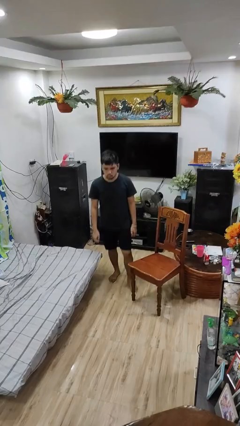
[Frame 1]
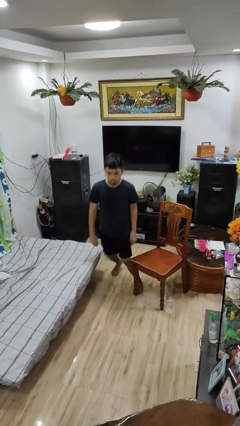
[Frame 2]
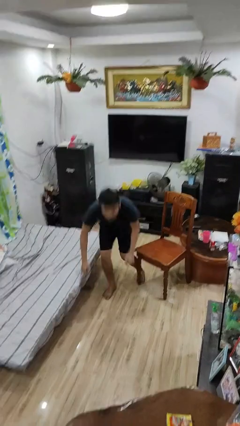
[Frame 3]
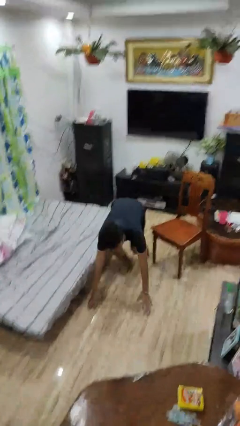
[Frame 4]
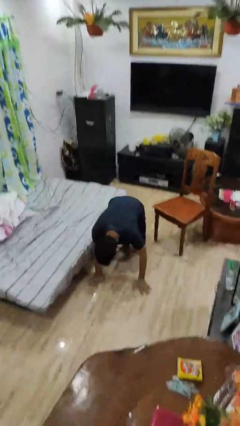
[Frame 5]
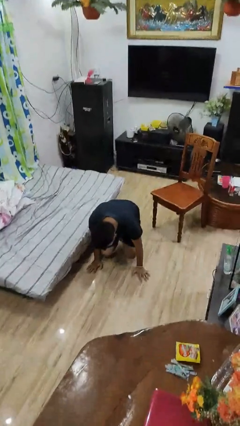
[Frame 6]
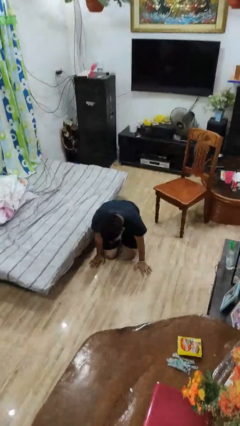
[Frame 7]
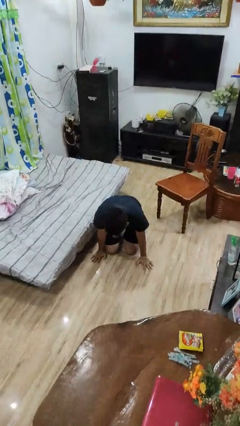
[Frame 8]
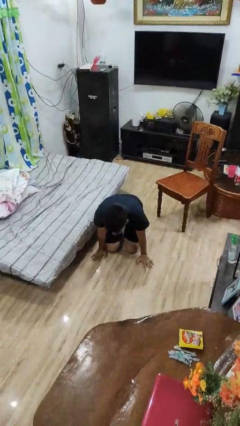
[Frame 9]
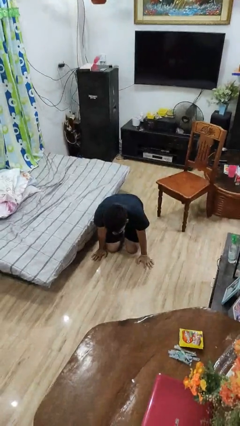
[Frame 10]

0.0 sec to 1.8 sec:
person trips on object on floor

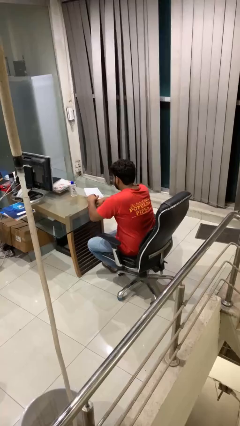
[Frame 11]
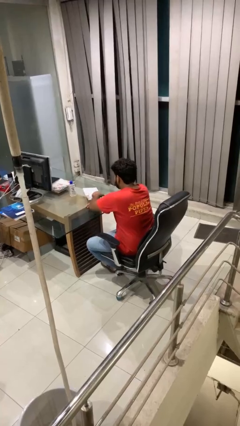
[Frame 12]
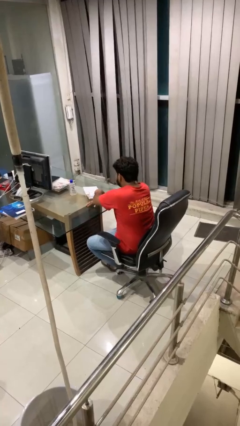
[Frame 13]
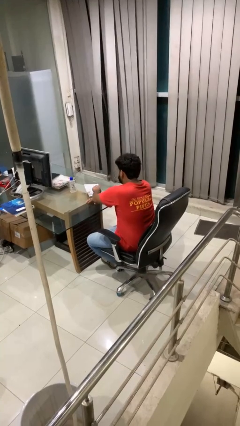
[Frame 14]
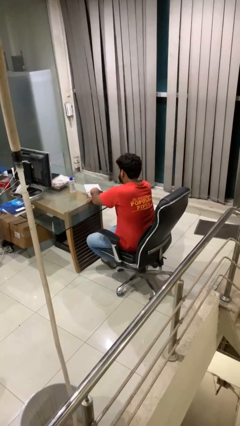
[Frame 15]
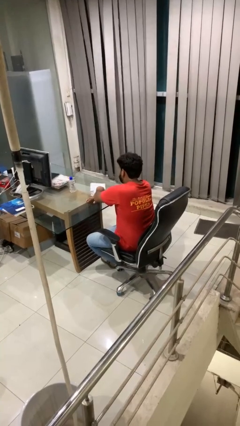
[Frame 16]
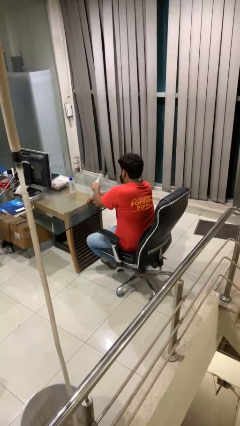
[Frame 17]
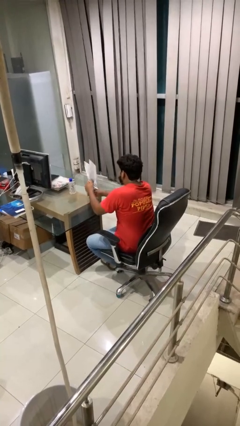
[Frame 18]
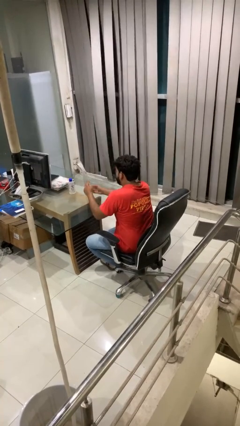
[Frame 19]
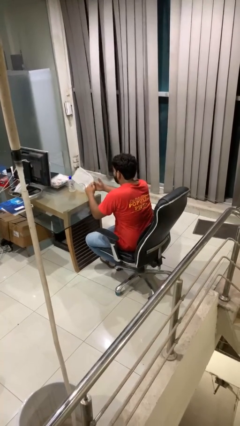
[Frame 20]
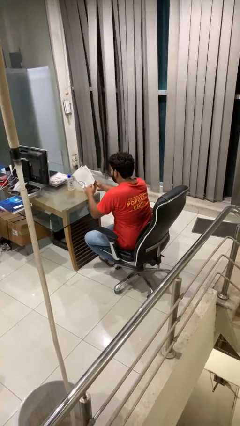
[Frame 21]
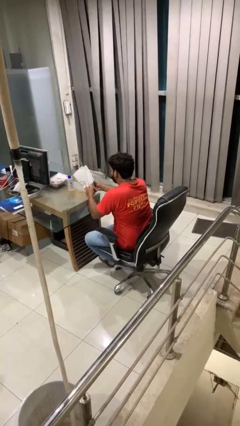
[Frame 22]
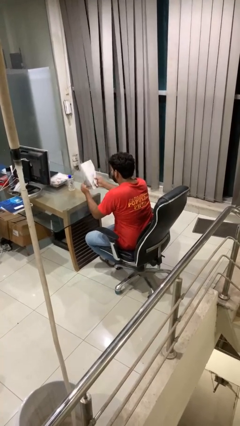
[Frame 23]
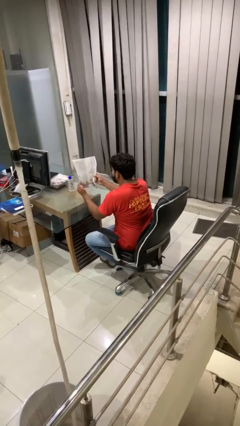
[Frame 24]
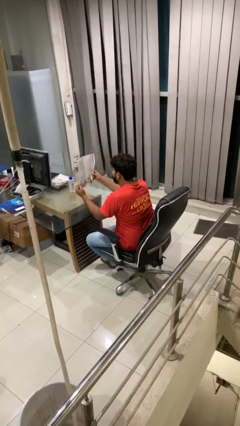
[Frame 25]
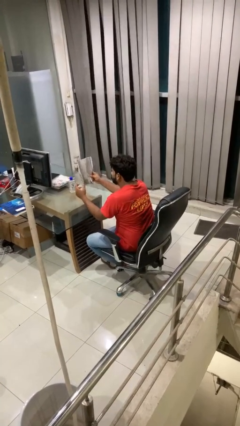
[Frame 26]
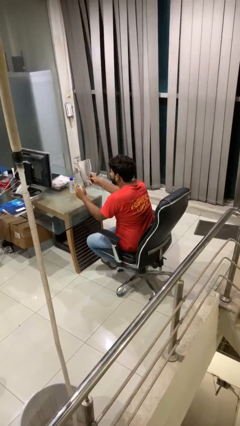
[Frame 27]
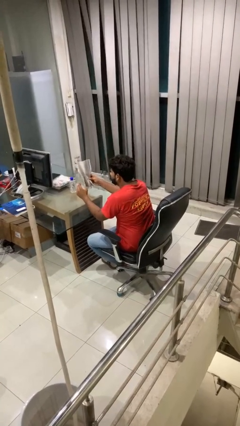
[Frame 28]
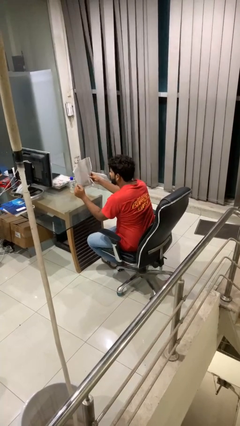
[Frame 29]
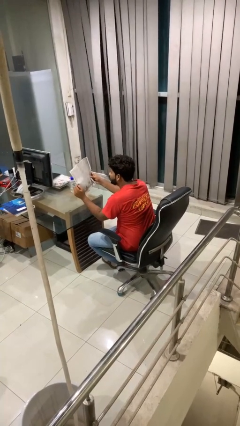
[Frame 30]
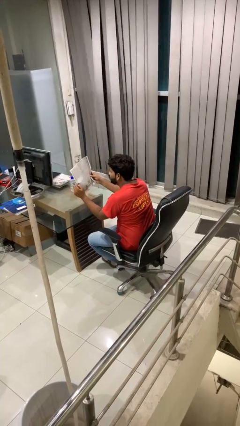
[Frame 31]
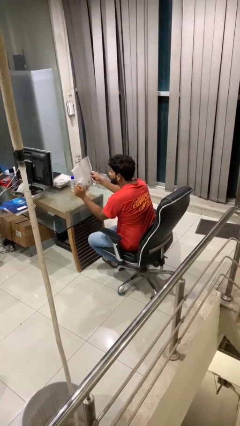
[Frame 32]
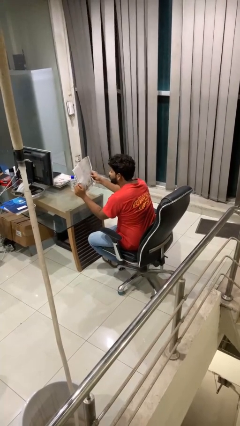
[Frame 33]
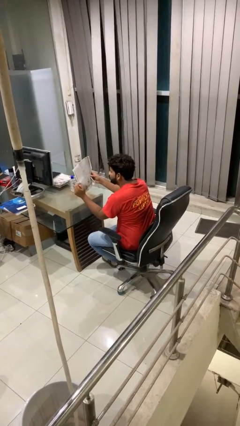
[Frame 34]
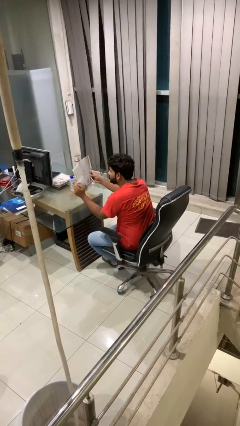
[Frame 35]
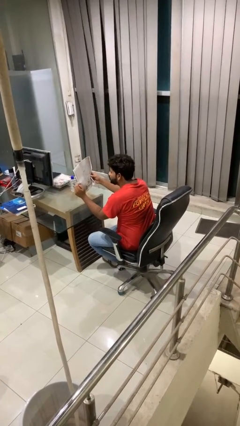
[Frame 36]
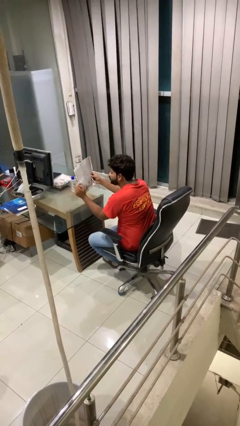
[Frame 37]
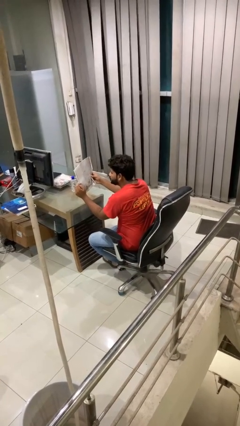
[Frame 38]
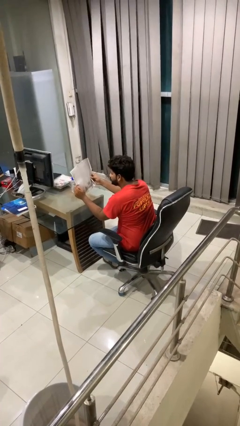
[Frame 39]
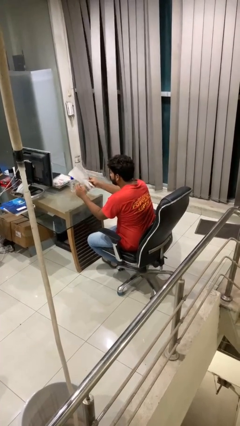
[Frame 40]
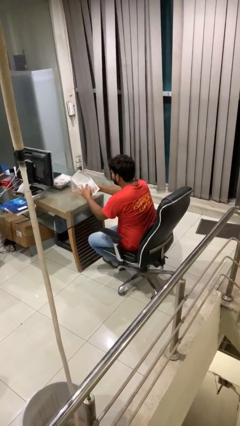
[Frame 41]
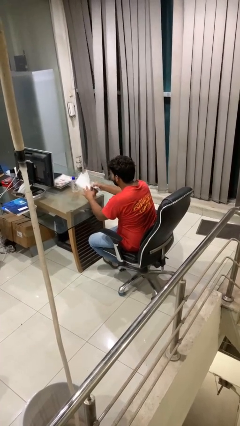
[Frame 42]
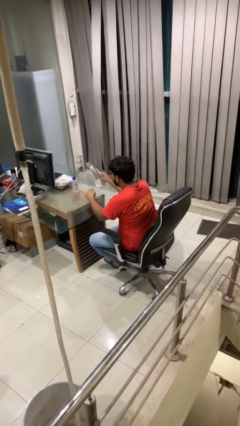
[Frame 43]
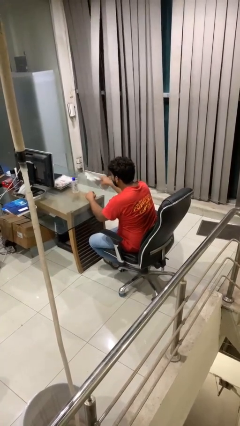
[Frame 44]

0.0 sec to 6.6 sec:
person reads newspaper

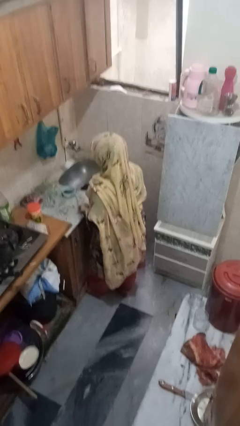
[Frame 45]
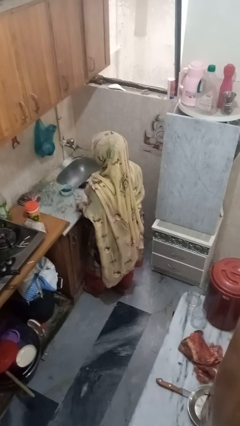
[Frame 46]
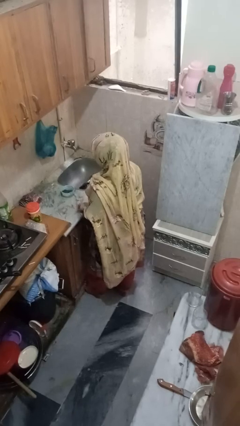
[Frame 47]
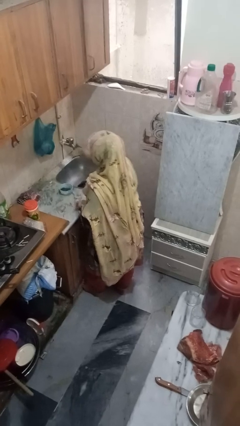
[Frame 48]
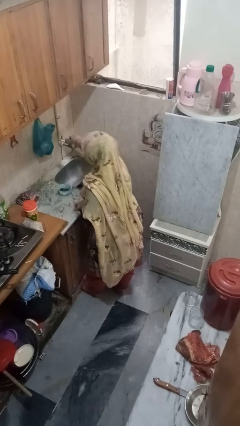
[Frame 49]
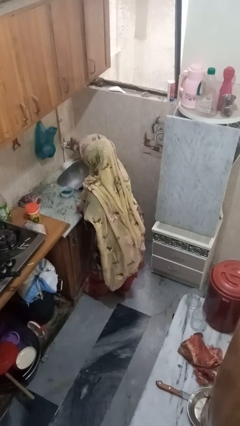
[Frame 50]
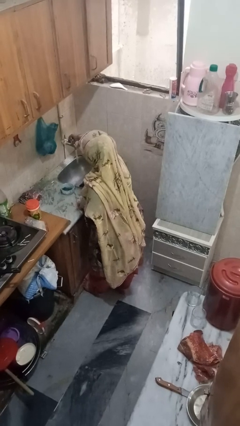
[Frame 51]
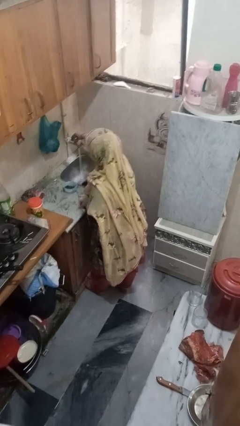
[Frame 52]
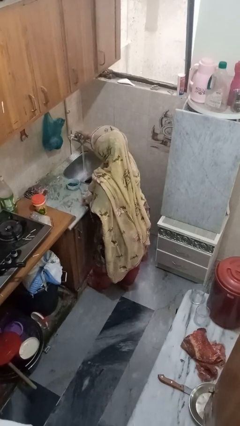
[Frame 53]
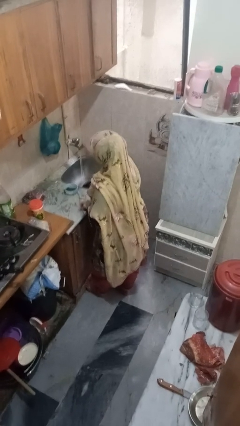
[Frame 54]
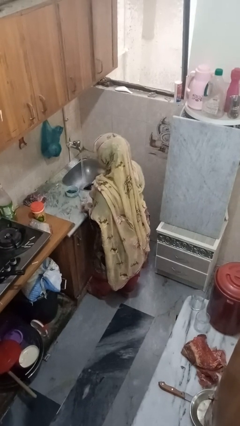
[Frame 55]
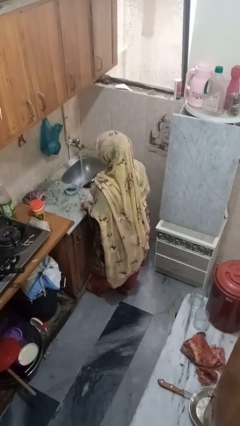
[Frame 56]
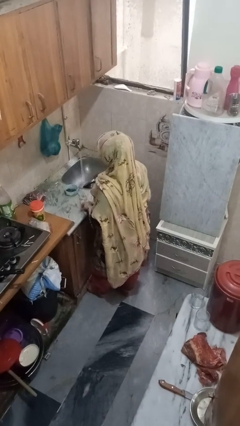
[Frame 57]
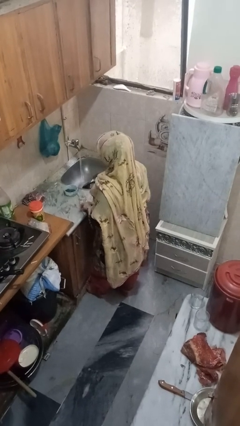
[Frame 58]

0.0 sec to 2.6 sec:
person turns on faucet

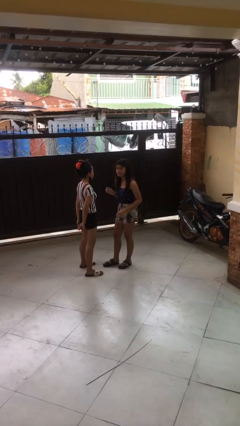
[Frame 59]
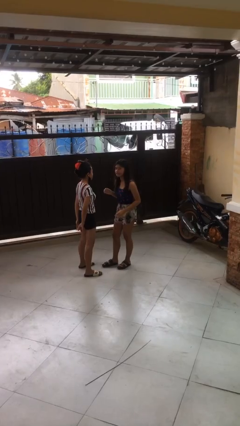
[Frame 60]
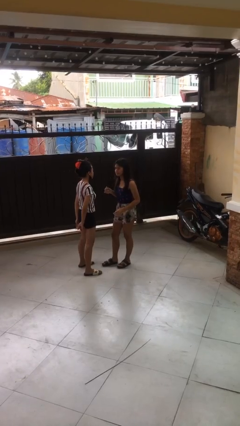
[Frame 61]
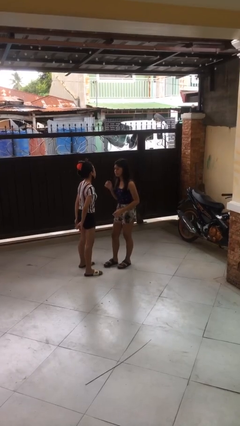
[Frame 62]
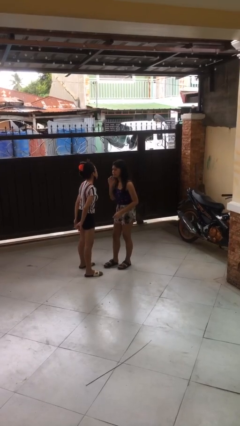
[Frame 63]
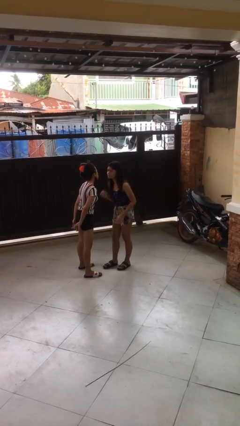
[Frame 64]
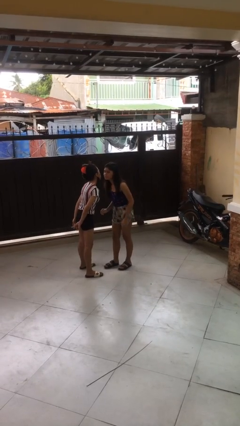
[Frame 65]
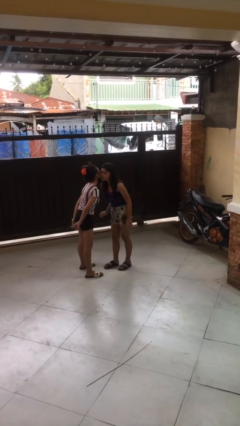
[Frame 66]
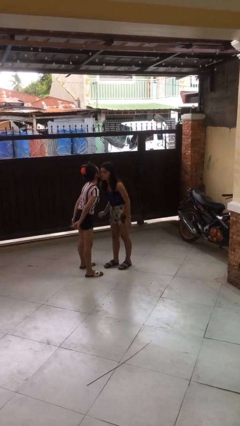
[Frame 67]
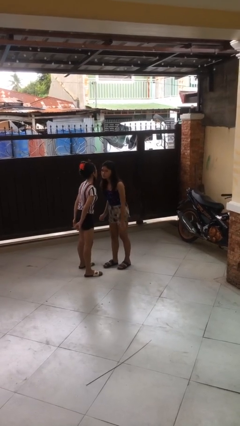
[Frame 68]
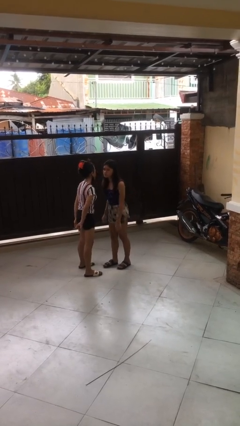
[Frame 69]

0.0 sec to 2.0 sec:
person kisses cheek of person

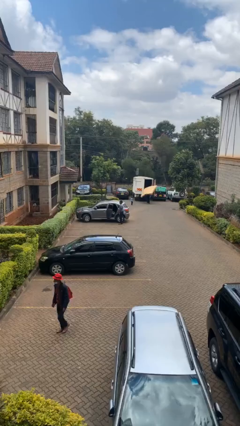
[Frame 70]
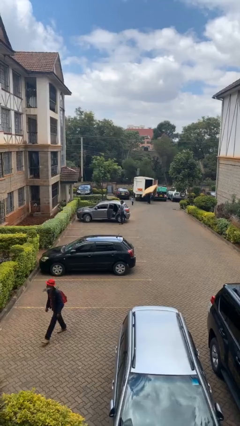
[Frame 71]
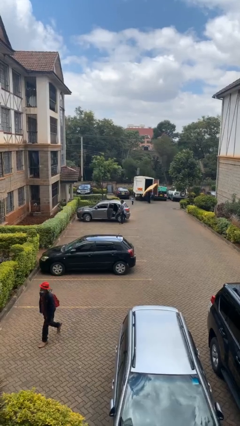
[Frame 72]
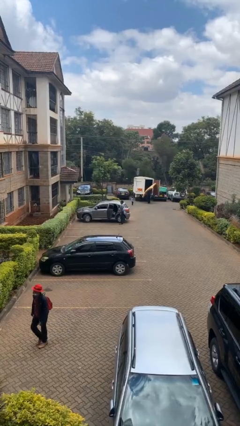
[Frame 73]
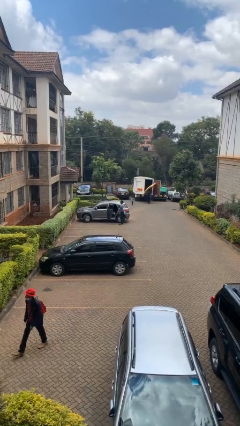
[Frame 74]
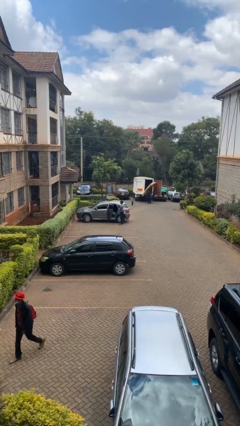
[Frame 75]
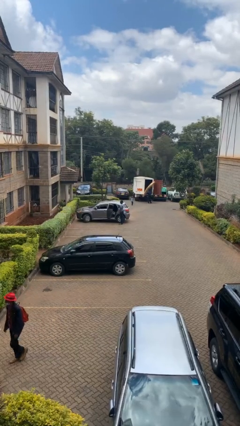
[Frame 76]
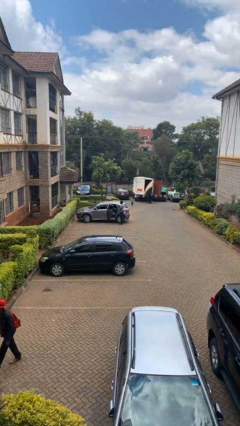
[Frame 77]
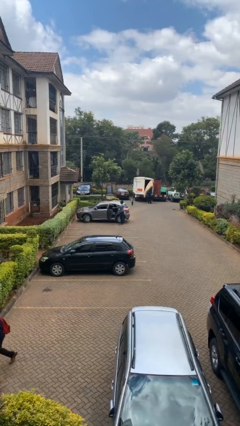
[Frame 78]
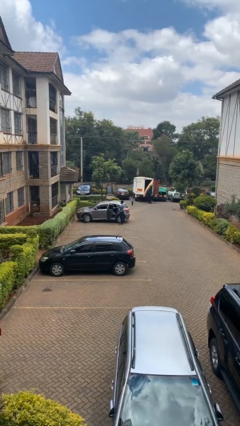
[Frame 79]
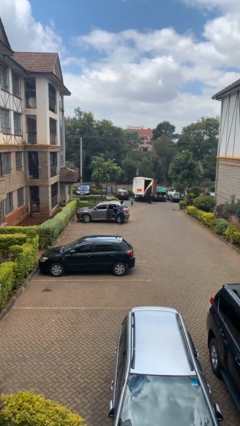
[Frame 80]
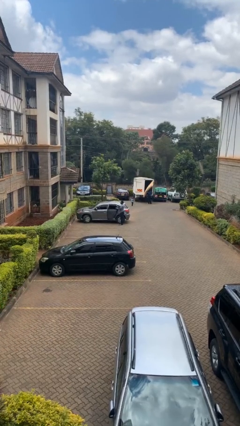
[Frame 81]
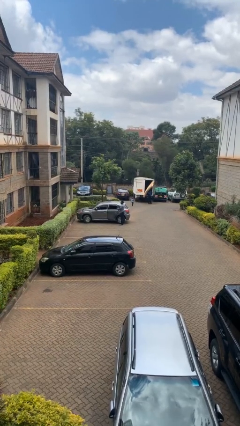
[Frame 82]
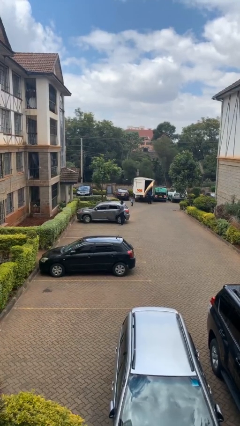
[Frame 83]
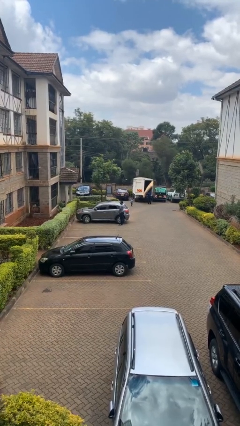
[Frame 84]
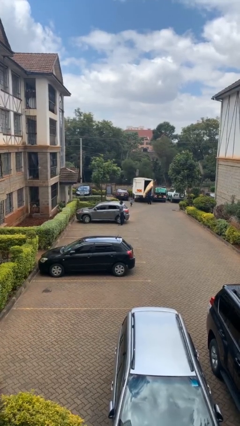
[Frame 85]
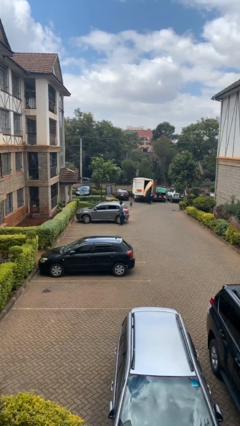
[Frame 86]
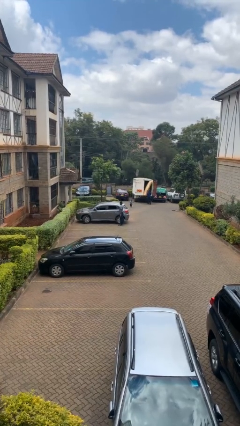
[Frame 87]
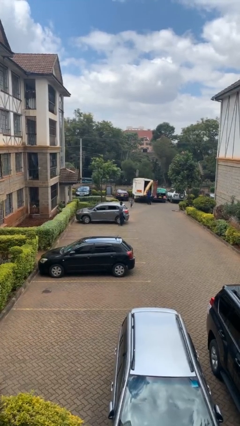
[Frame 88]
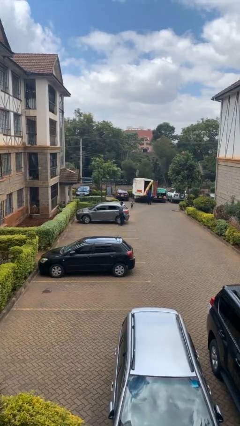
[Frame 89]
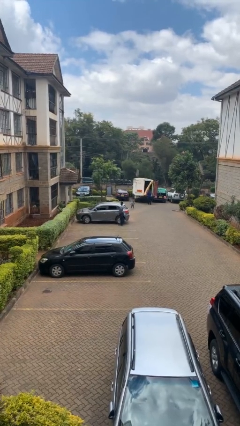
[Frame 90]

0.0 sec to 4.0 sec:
person closes car door

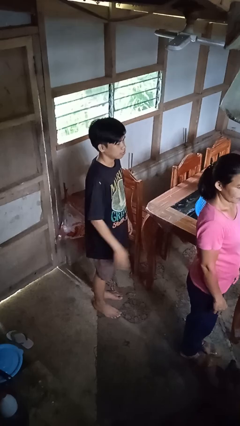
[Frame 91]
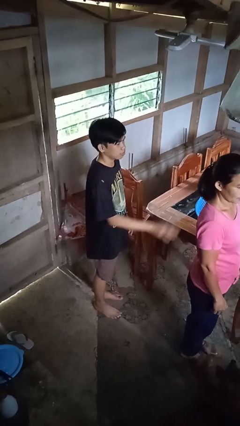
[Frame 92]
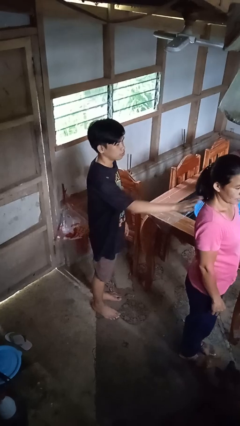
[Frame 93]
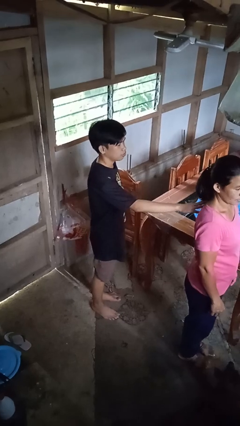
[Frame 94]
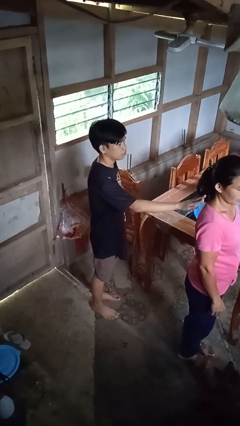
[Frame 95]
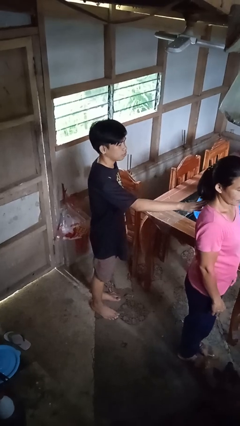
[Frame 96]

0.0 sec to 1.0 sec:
person touches back of person
